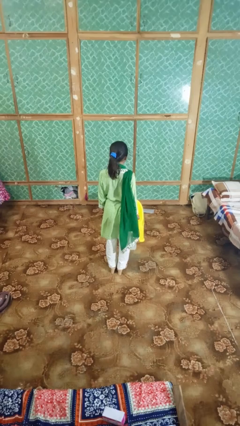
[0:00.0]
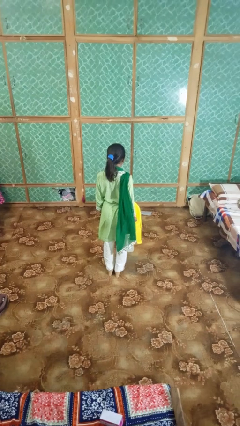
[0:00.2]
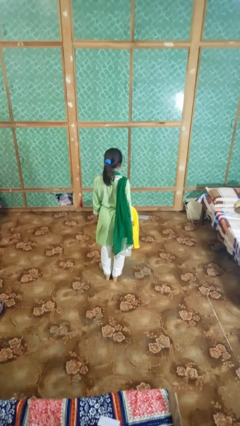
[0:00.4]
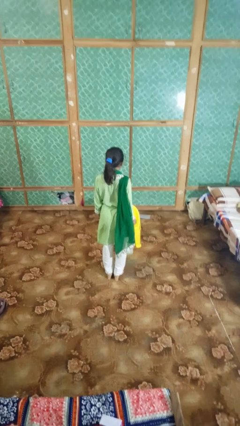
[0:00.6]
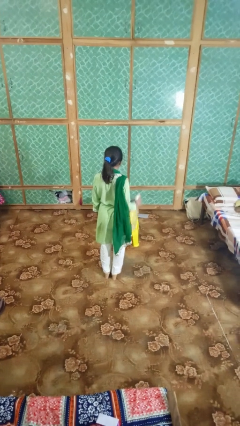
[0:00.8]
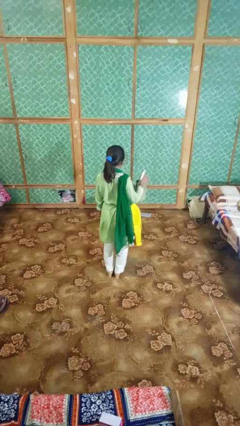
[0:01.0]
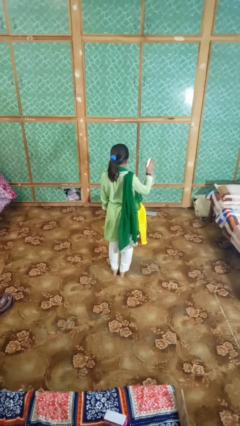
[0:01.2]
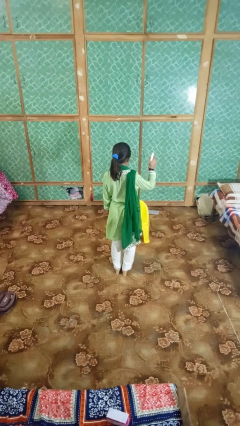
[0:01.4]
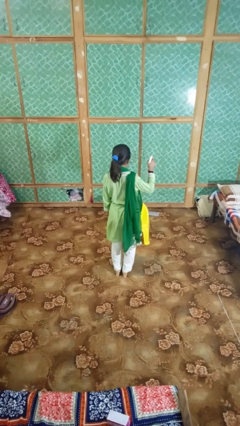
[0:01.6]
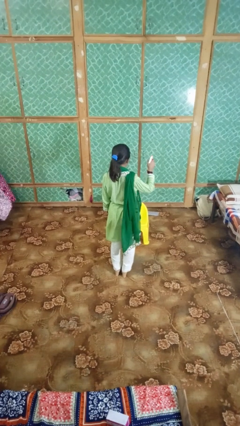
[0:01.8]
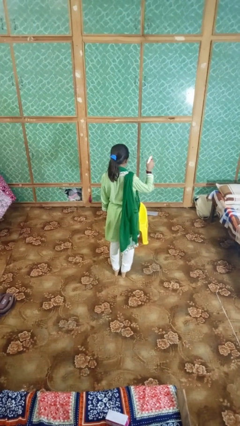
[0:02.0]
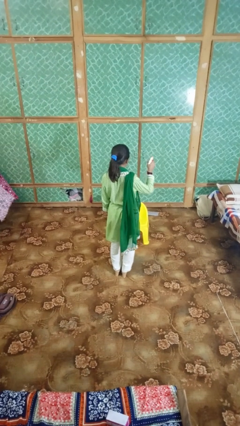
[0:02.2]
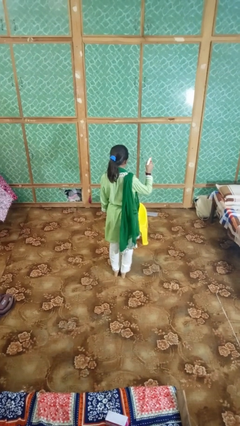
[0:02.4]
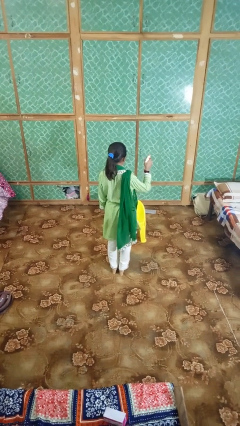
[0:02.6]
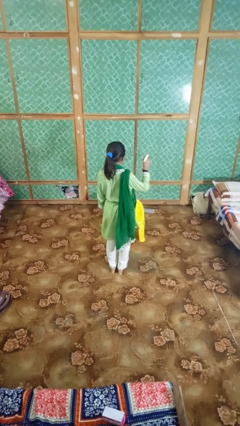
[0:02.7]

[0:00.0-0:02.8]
person sprays from bottle

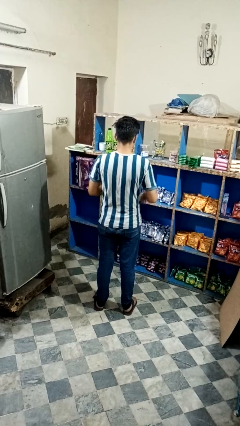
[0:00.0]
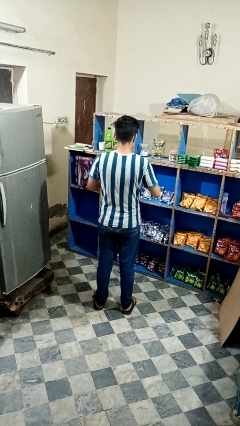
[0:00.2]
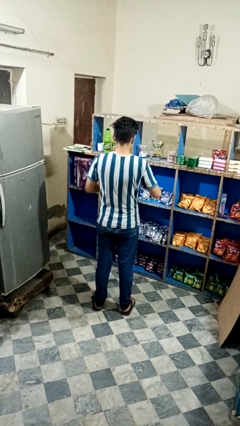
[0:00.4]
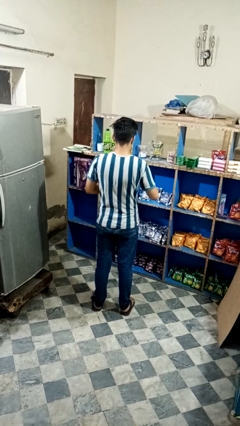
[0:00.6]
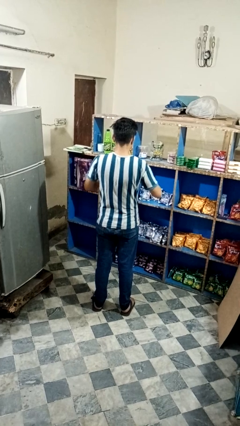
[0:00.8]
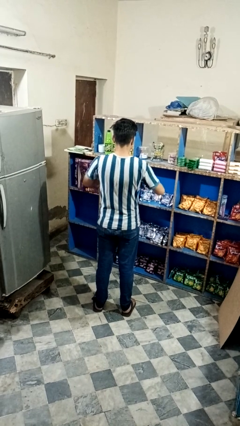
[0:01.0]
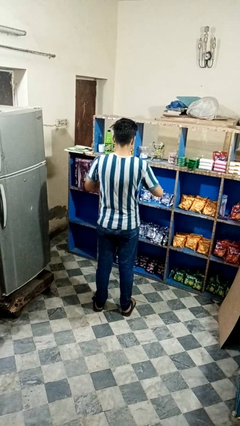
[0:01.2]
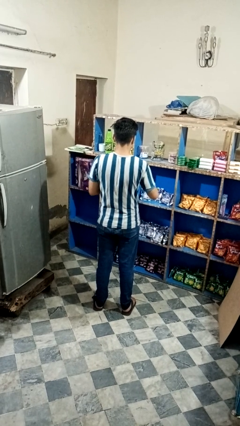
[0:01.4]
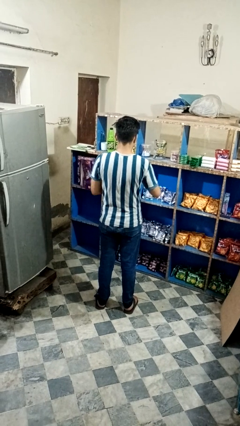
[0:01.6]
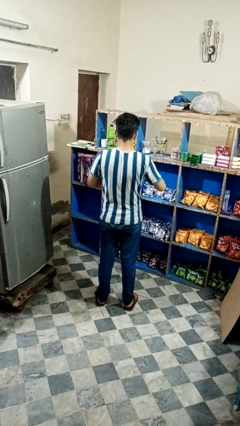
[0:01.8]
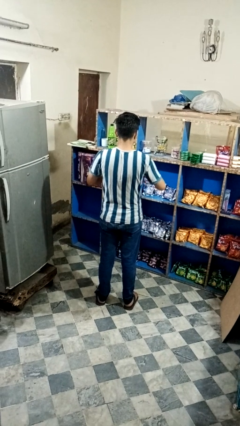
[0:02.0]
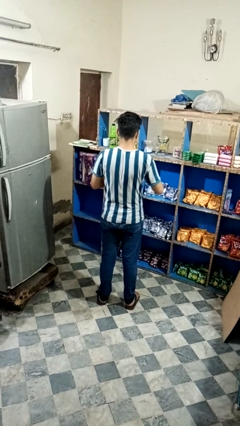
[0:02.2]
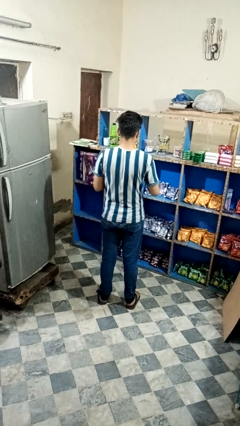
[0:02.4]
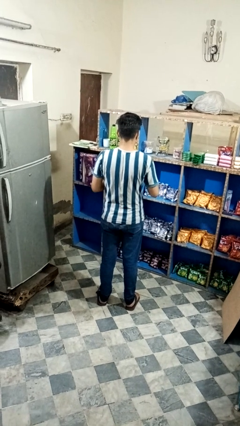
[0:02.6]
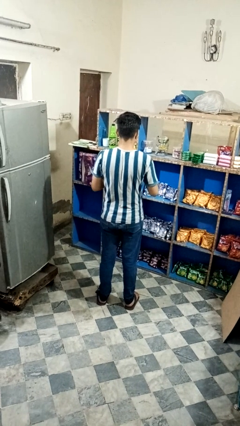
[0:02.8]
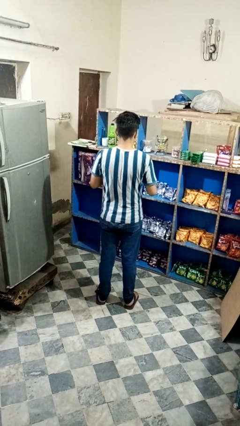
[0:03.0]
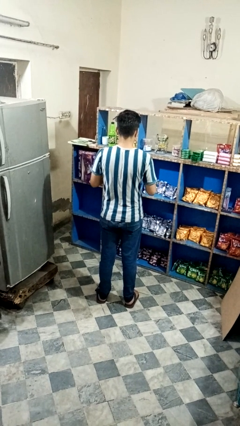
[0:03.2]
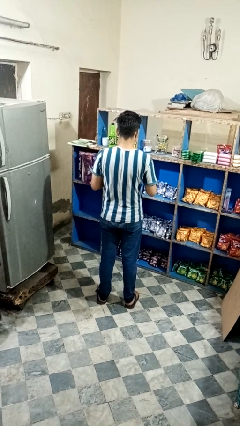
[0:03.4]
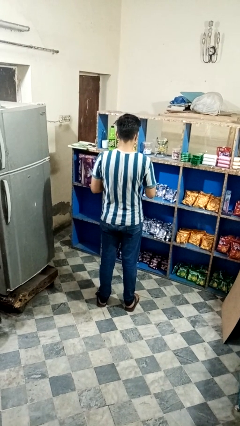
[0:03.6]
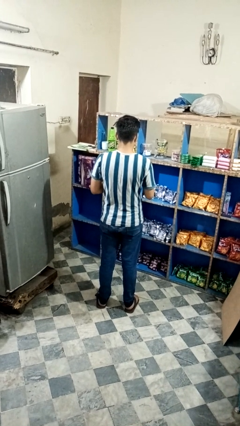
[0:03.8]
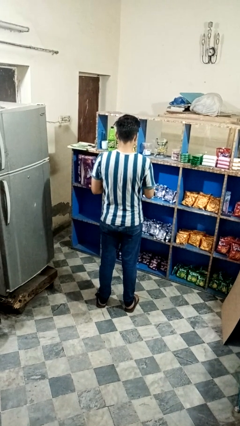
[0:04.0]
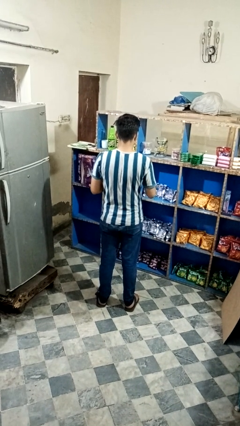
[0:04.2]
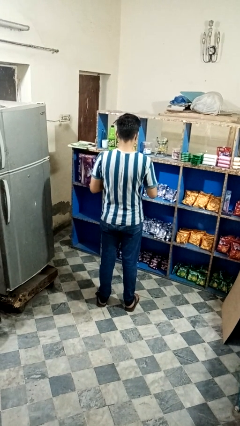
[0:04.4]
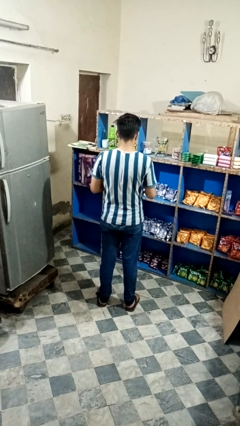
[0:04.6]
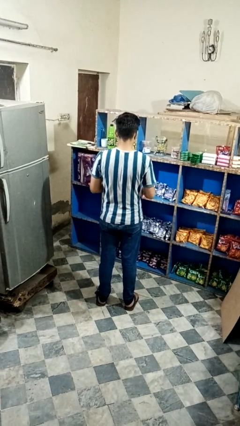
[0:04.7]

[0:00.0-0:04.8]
person squeezes object

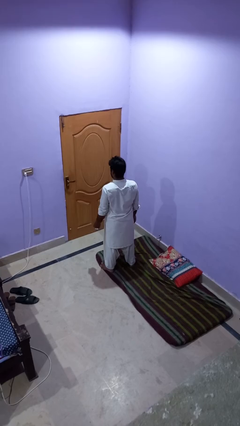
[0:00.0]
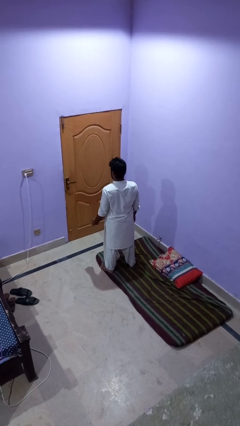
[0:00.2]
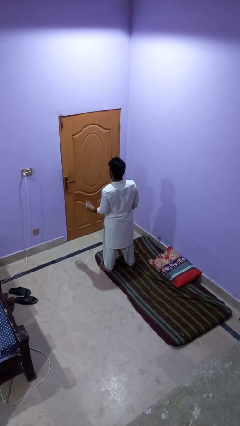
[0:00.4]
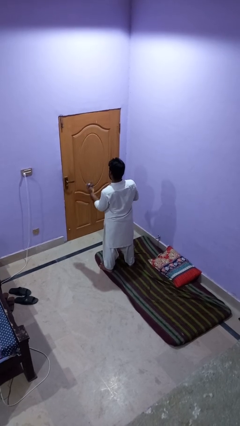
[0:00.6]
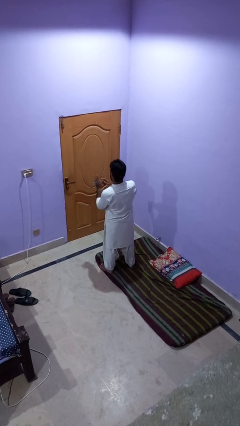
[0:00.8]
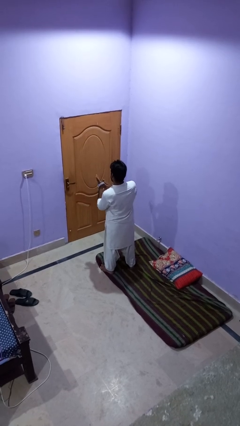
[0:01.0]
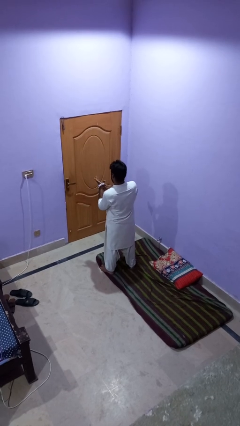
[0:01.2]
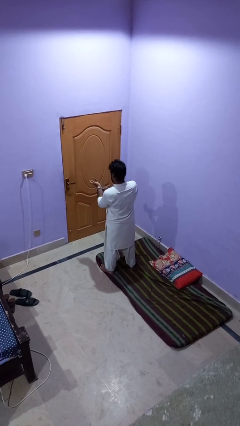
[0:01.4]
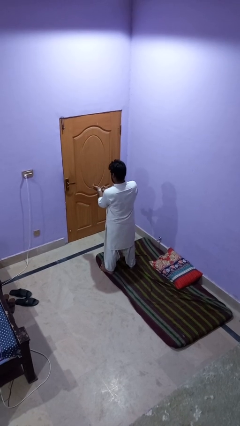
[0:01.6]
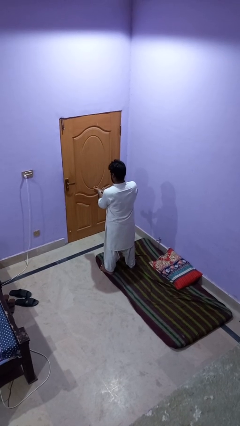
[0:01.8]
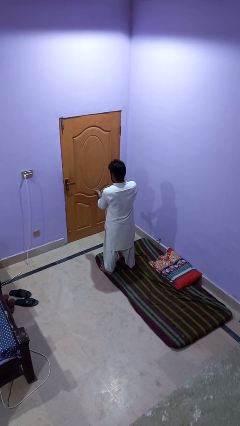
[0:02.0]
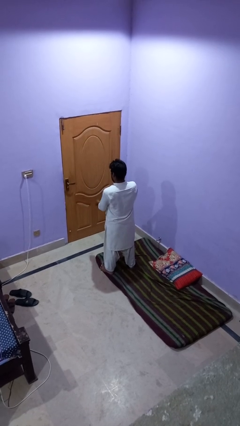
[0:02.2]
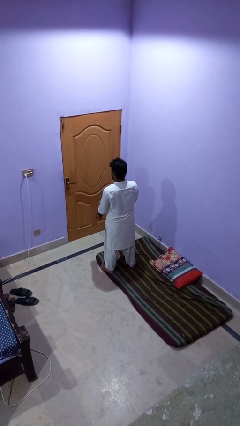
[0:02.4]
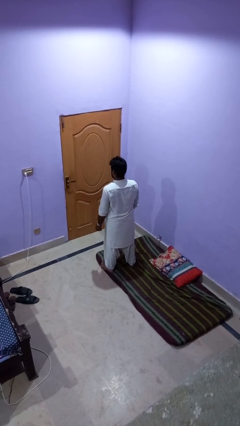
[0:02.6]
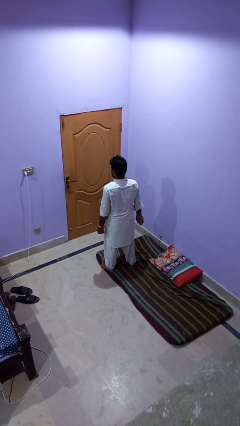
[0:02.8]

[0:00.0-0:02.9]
person puts on wristwatch

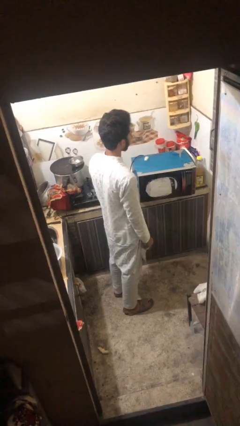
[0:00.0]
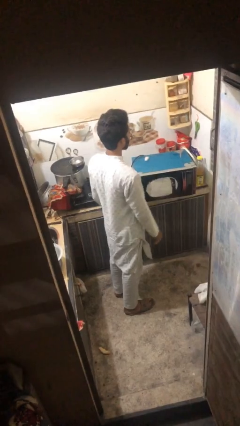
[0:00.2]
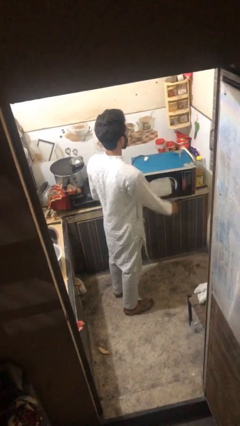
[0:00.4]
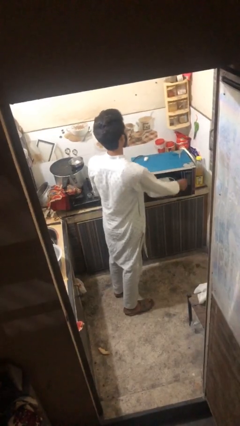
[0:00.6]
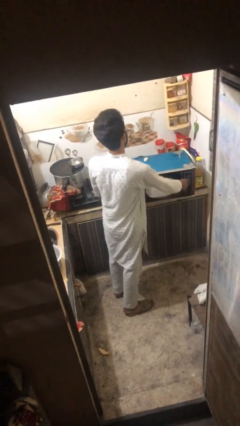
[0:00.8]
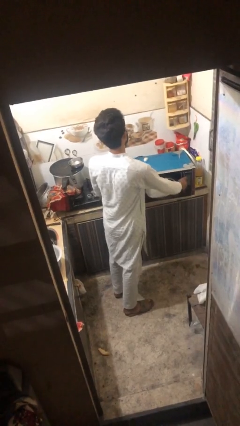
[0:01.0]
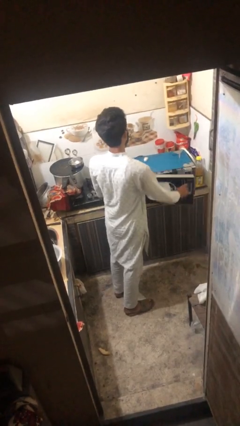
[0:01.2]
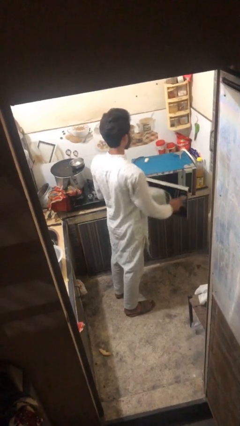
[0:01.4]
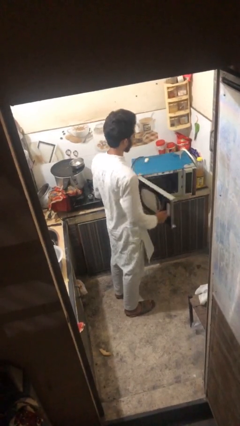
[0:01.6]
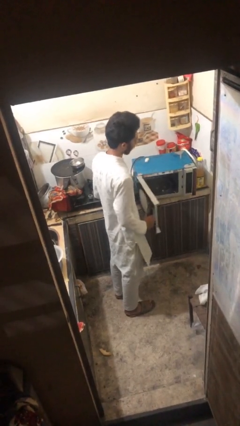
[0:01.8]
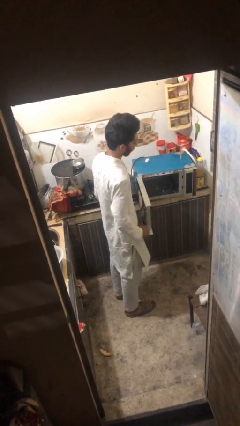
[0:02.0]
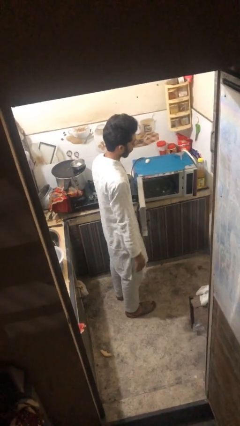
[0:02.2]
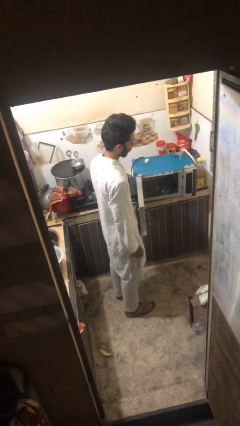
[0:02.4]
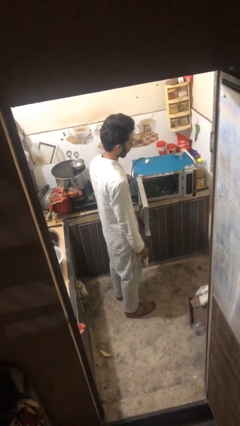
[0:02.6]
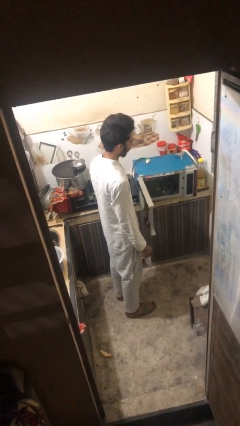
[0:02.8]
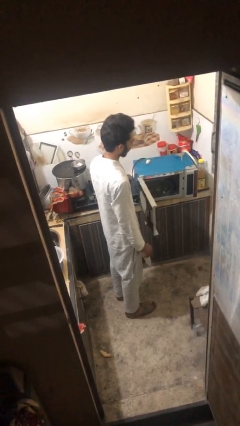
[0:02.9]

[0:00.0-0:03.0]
person opens oven door

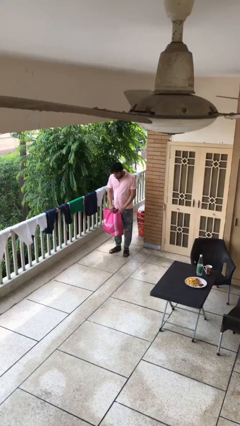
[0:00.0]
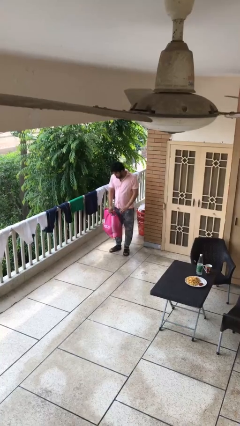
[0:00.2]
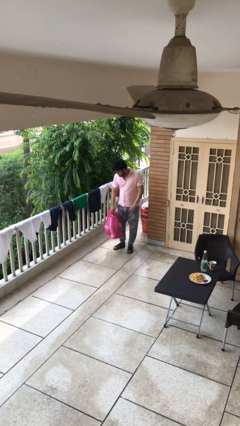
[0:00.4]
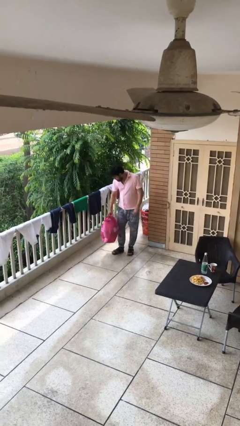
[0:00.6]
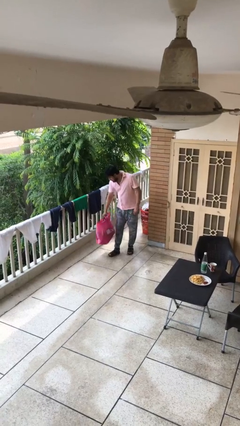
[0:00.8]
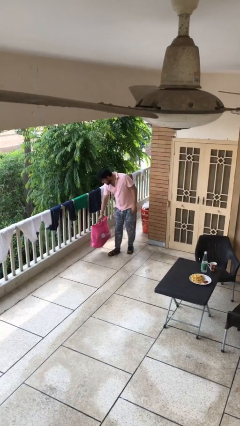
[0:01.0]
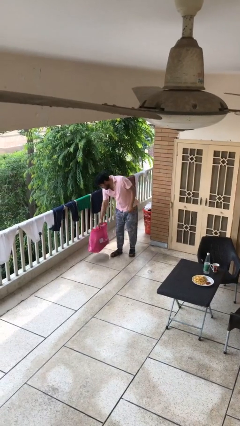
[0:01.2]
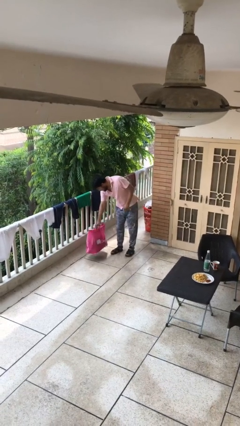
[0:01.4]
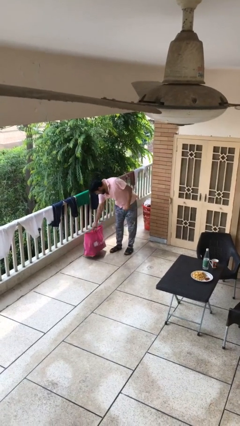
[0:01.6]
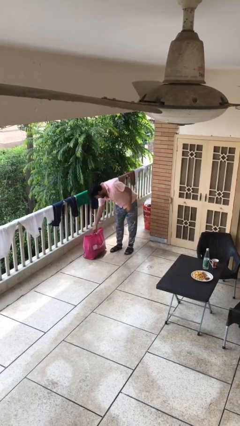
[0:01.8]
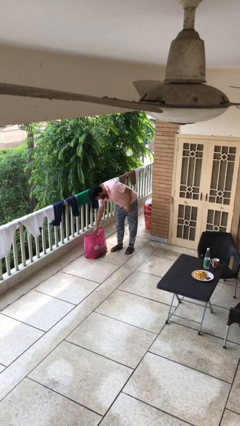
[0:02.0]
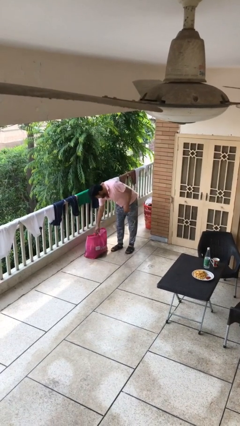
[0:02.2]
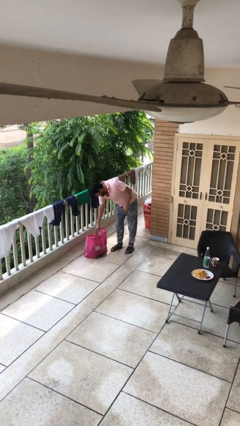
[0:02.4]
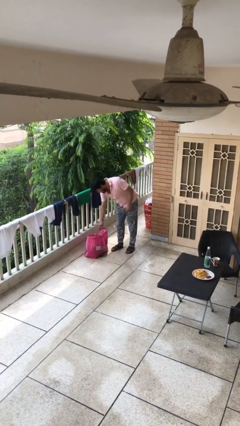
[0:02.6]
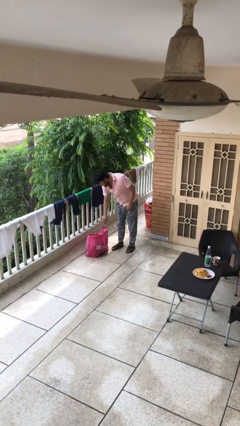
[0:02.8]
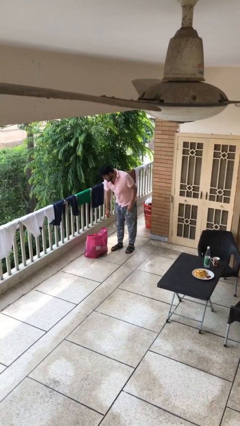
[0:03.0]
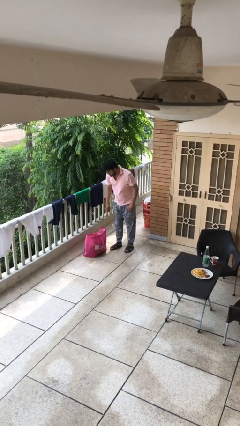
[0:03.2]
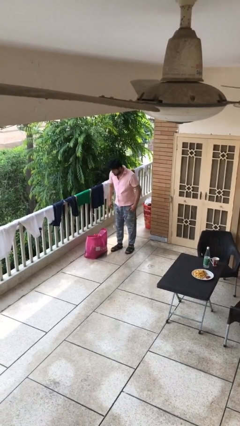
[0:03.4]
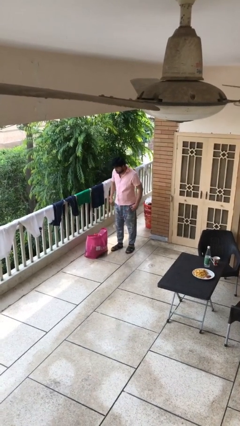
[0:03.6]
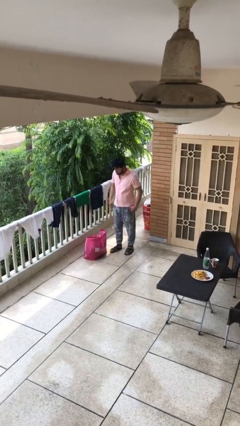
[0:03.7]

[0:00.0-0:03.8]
person puts down object on floor

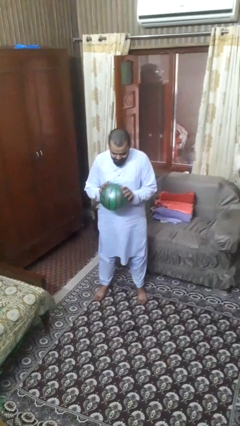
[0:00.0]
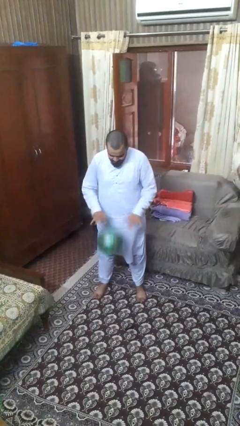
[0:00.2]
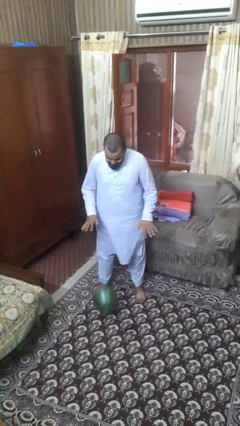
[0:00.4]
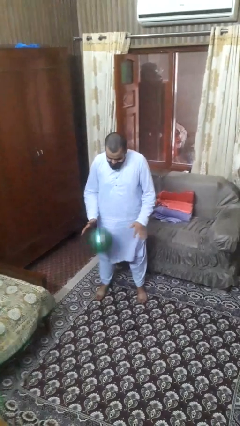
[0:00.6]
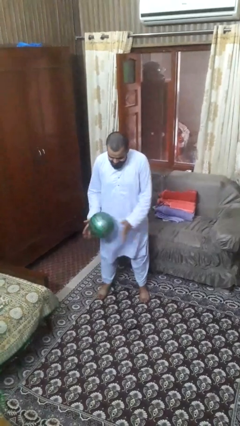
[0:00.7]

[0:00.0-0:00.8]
person bounces ball on floor
